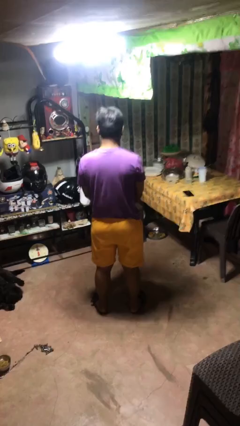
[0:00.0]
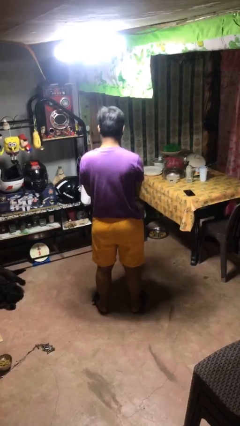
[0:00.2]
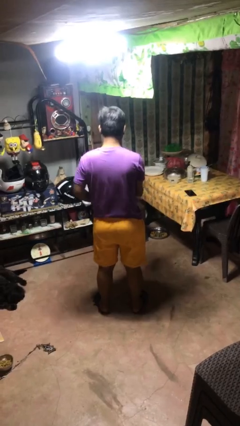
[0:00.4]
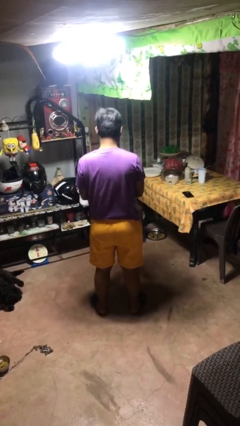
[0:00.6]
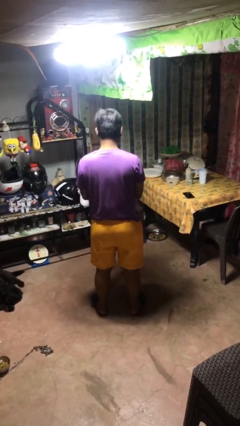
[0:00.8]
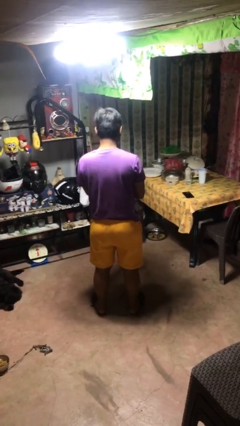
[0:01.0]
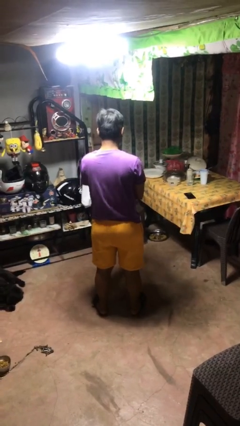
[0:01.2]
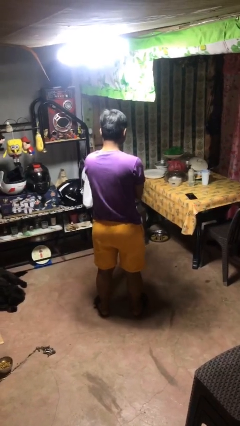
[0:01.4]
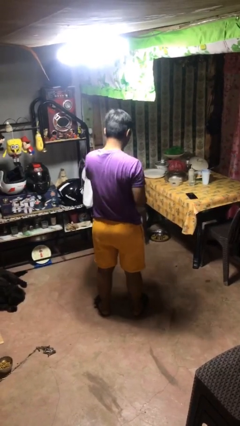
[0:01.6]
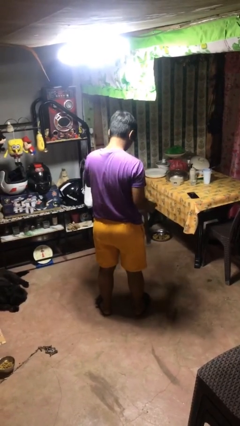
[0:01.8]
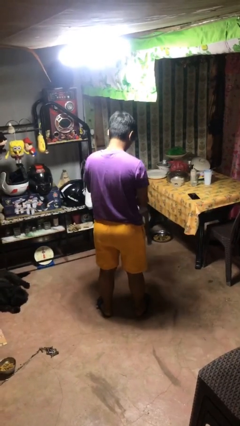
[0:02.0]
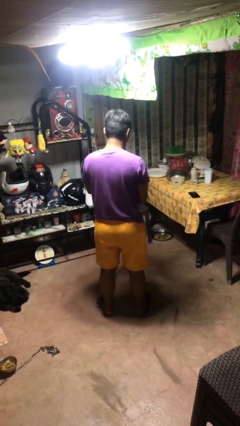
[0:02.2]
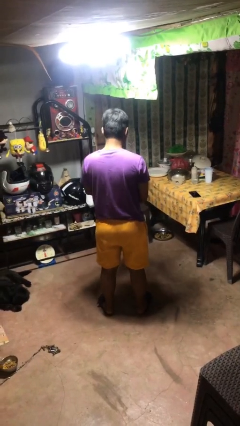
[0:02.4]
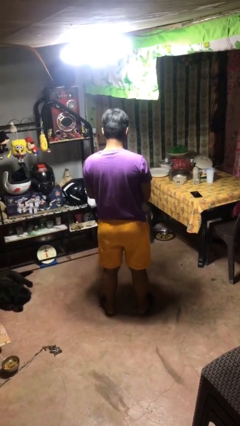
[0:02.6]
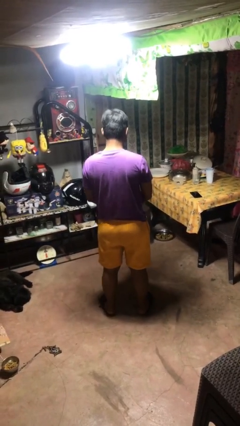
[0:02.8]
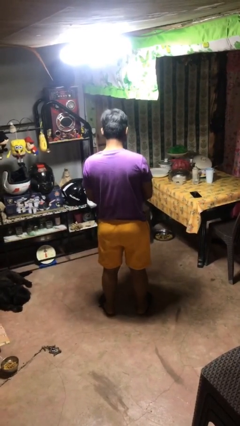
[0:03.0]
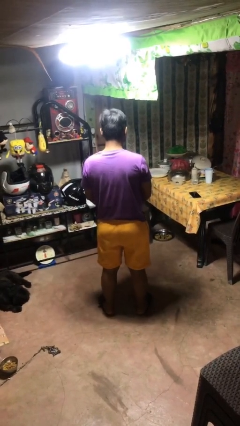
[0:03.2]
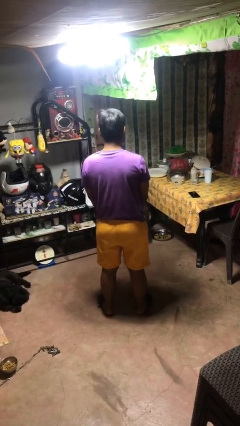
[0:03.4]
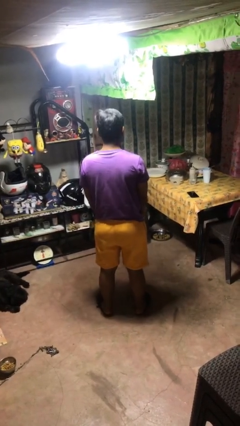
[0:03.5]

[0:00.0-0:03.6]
person takes off gloves

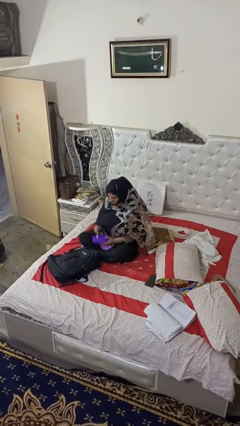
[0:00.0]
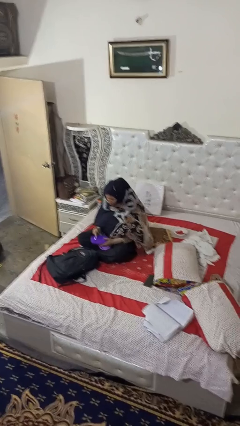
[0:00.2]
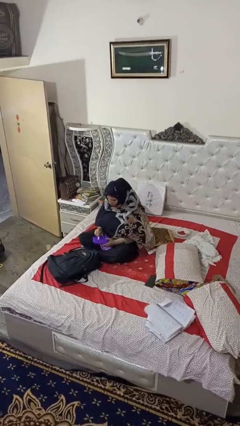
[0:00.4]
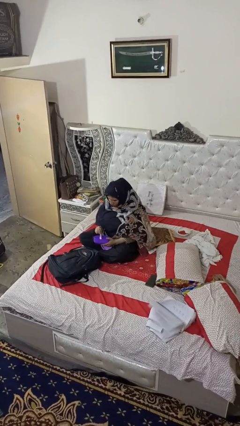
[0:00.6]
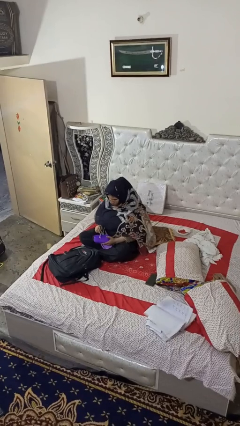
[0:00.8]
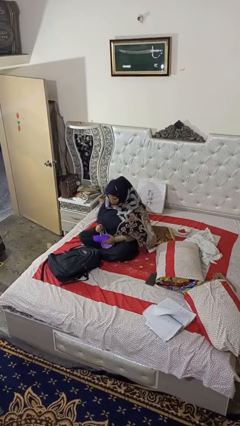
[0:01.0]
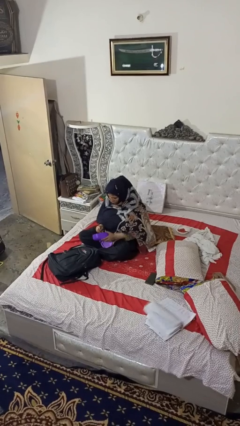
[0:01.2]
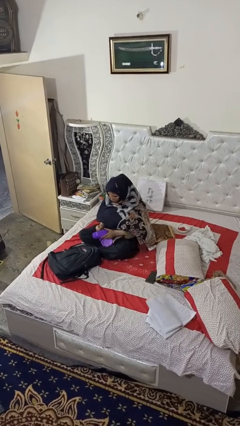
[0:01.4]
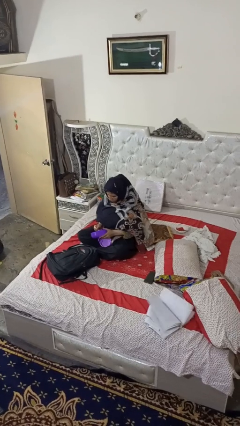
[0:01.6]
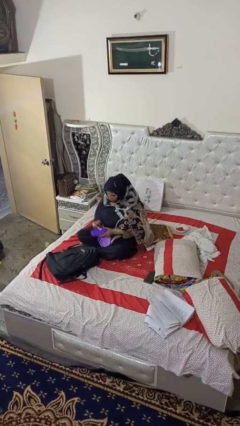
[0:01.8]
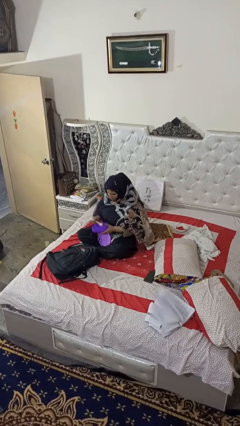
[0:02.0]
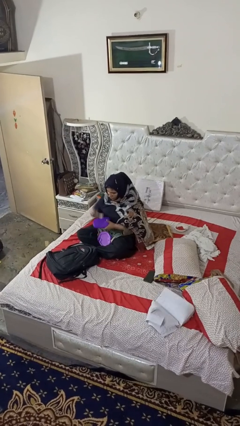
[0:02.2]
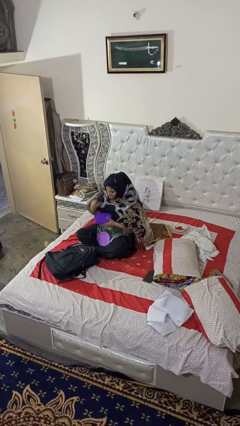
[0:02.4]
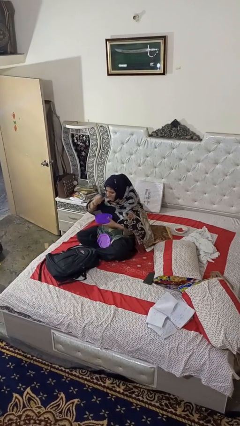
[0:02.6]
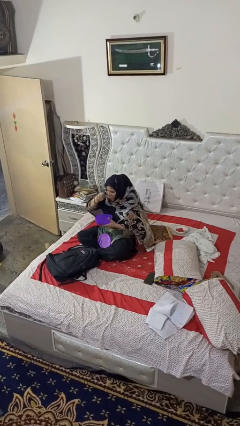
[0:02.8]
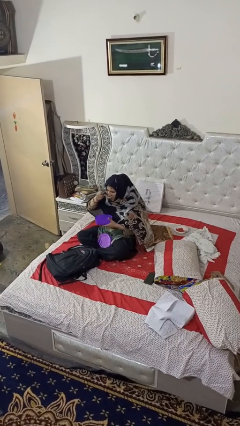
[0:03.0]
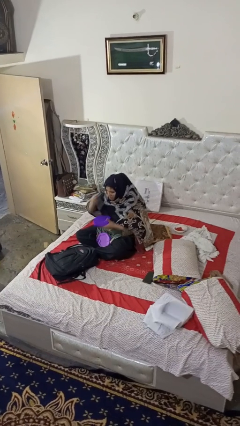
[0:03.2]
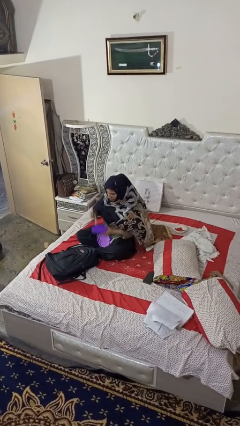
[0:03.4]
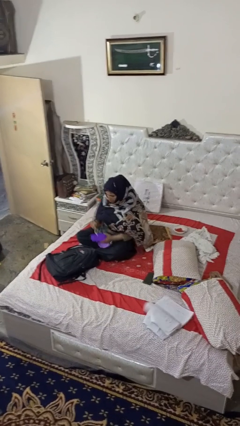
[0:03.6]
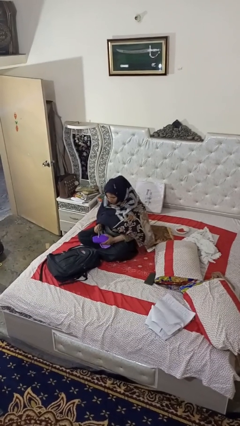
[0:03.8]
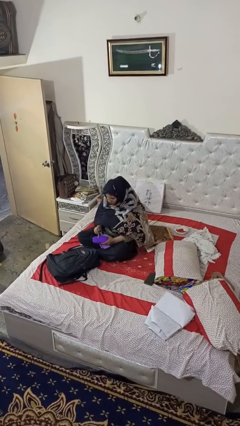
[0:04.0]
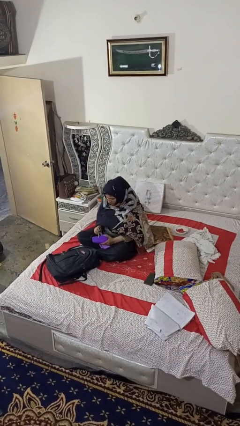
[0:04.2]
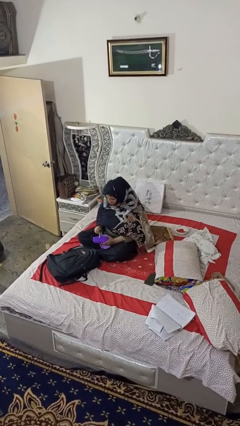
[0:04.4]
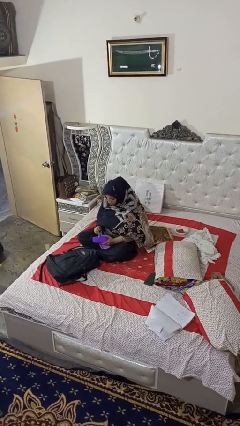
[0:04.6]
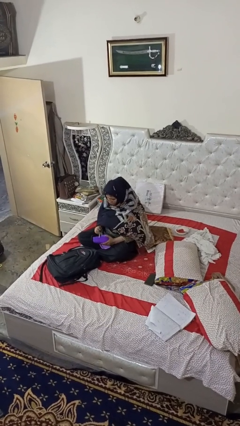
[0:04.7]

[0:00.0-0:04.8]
person eats snack from bag

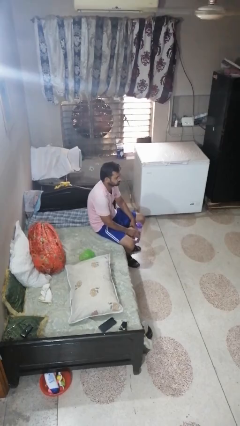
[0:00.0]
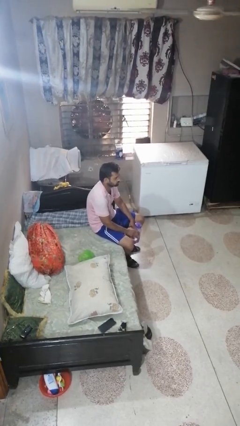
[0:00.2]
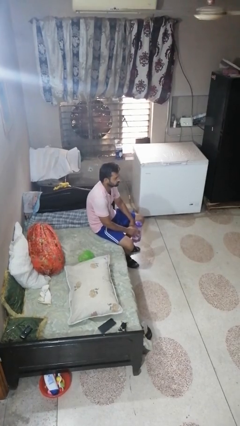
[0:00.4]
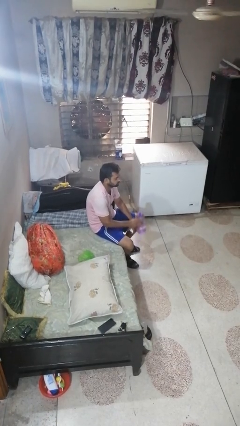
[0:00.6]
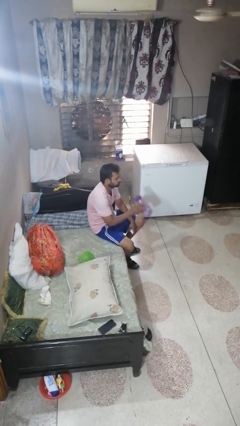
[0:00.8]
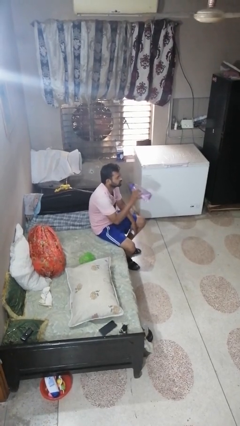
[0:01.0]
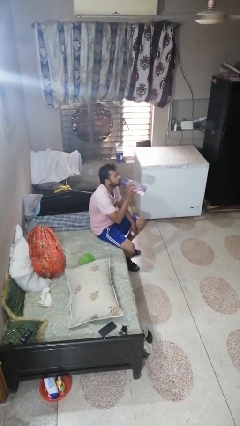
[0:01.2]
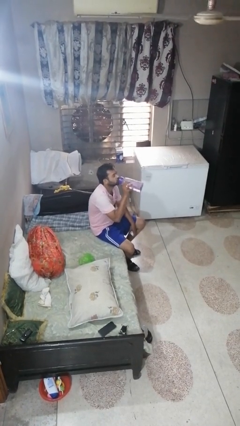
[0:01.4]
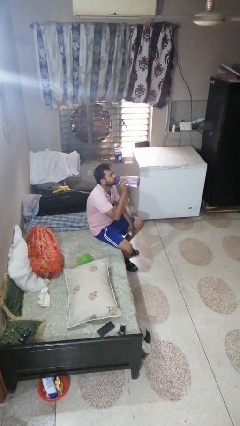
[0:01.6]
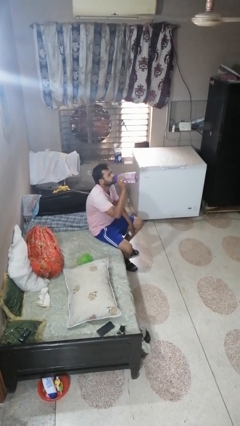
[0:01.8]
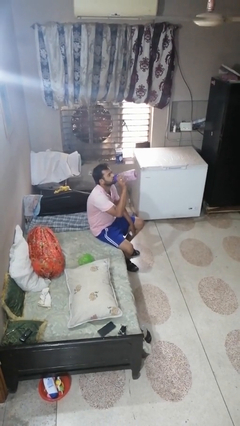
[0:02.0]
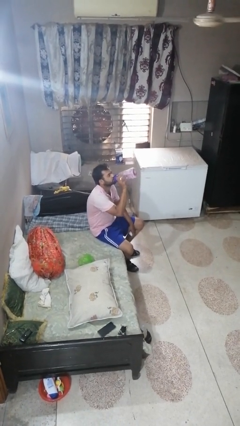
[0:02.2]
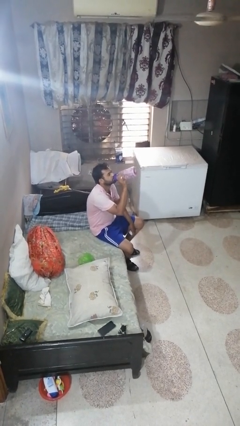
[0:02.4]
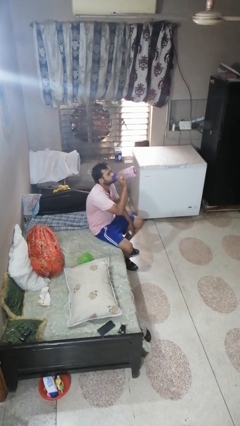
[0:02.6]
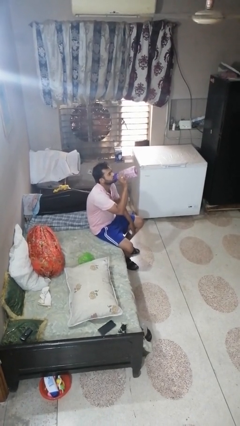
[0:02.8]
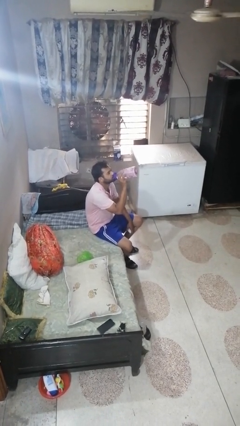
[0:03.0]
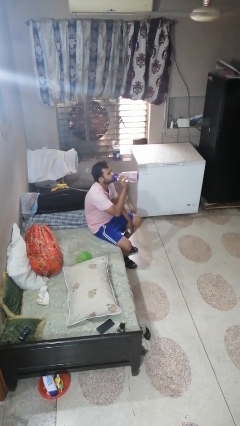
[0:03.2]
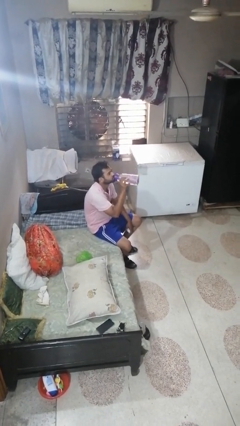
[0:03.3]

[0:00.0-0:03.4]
person drinks from bottle

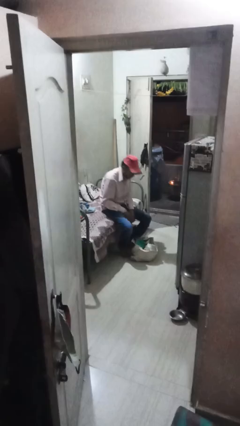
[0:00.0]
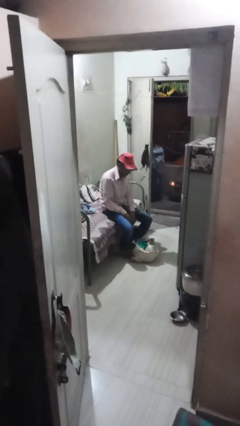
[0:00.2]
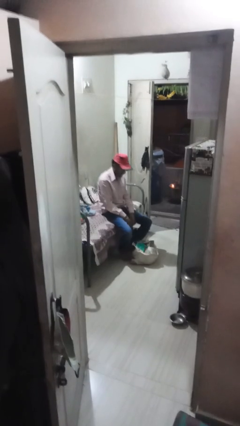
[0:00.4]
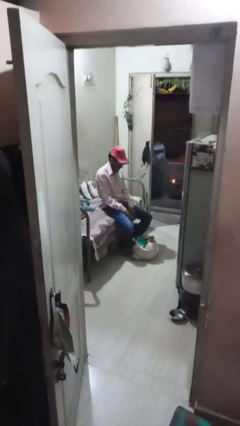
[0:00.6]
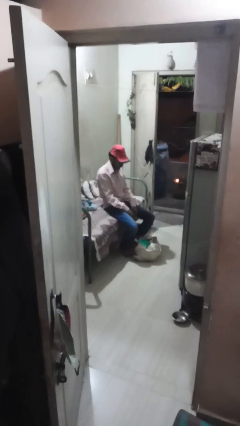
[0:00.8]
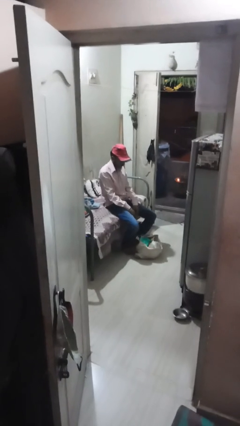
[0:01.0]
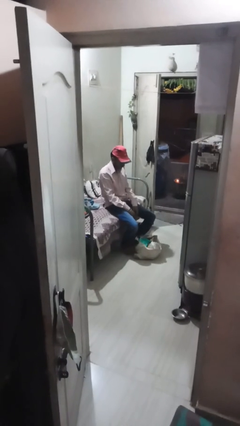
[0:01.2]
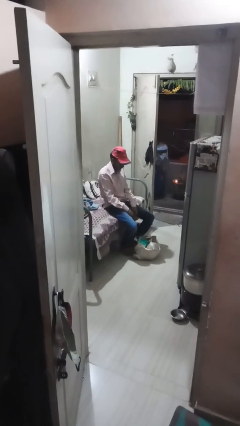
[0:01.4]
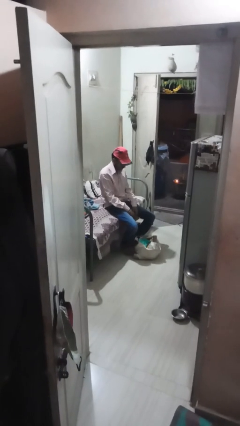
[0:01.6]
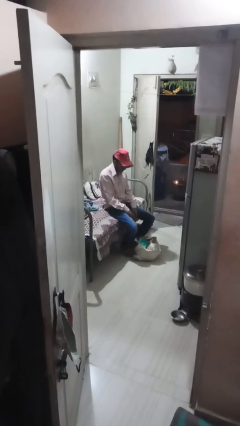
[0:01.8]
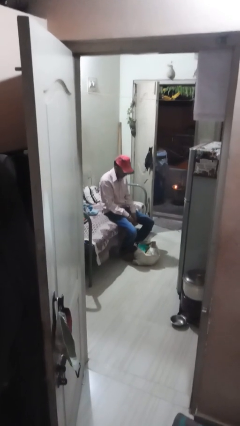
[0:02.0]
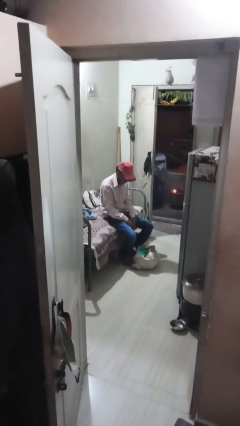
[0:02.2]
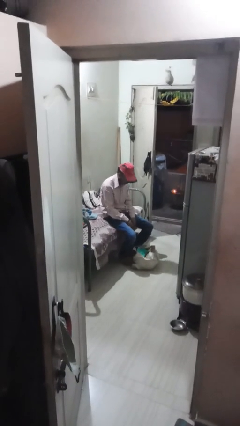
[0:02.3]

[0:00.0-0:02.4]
person searches in bag

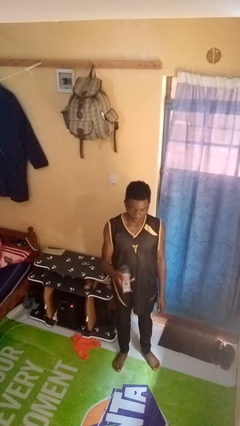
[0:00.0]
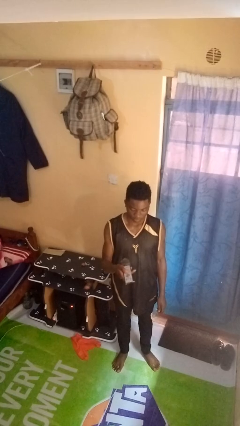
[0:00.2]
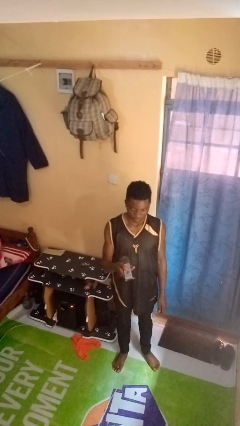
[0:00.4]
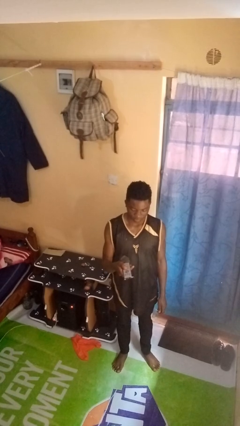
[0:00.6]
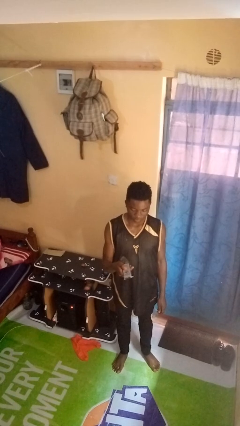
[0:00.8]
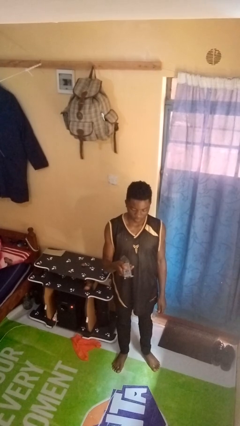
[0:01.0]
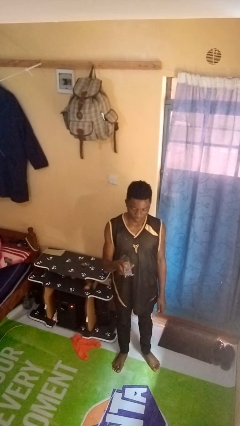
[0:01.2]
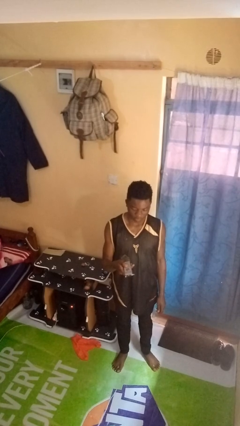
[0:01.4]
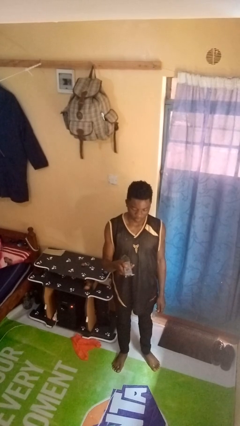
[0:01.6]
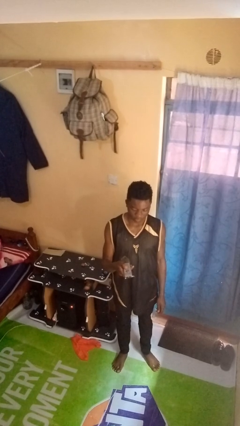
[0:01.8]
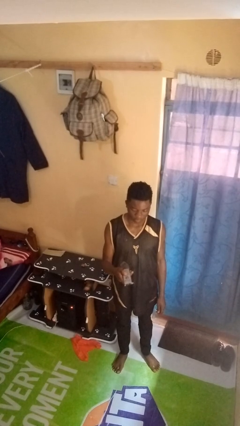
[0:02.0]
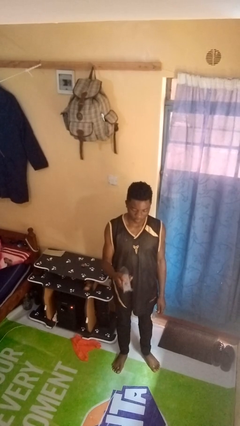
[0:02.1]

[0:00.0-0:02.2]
person uses television remote

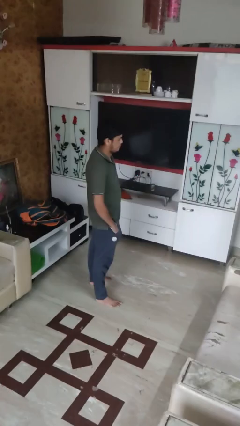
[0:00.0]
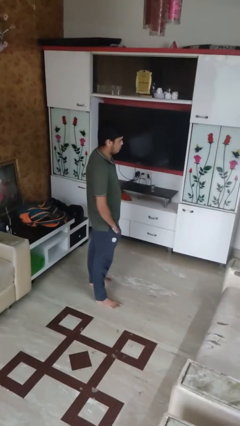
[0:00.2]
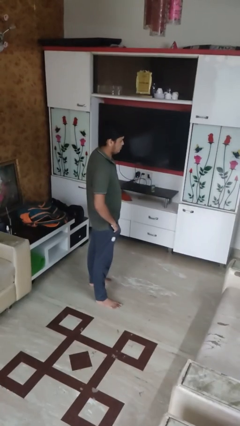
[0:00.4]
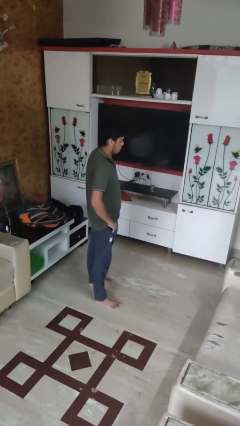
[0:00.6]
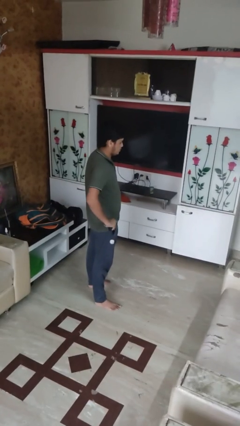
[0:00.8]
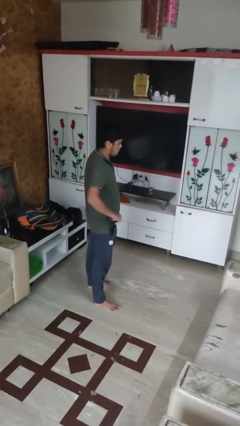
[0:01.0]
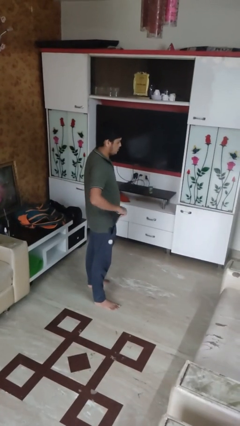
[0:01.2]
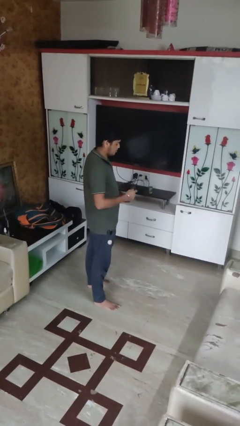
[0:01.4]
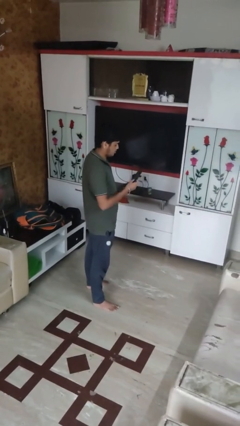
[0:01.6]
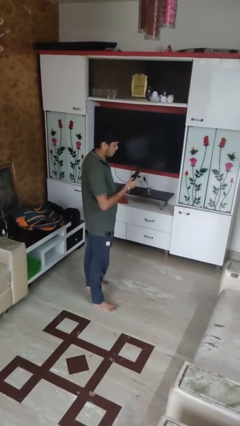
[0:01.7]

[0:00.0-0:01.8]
person takes phone from pocket
